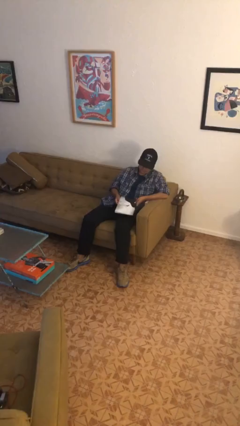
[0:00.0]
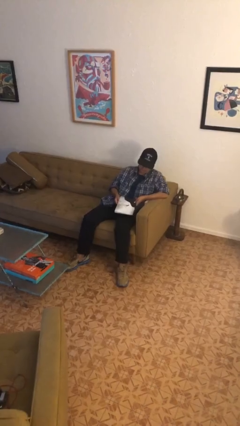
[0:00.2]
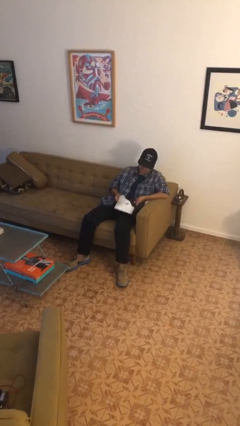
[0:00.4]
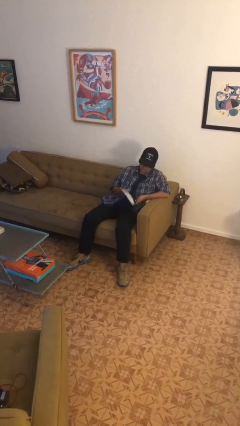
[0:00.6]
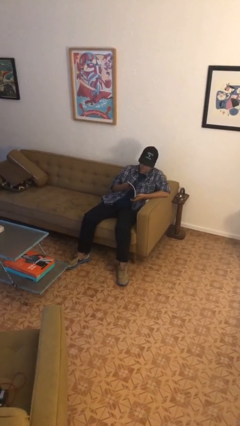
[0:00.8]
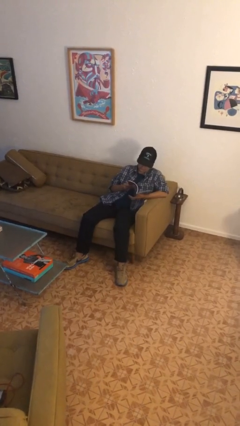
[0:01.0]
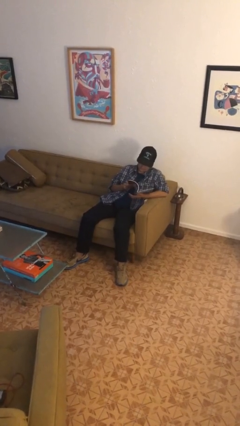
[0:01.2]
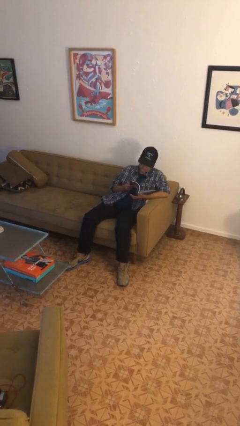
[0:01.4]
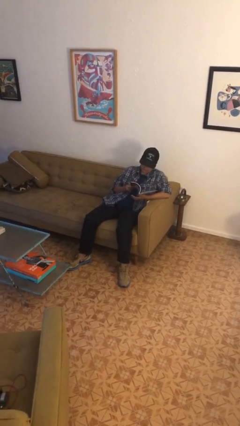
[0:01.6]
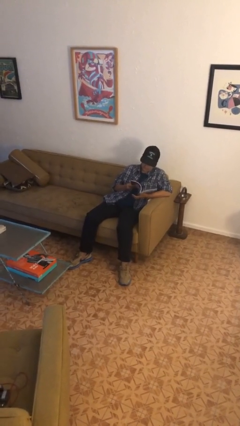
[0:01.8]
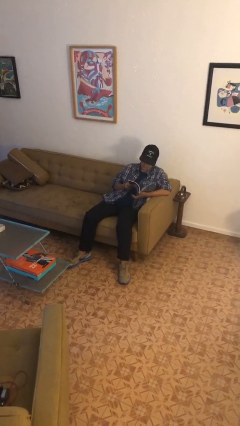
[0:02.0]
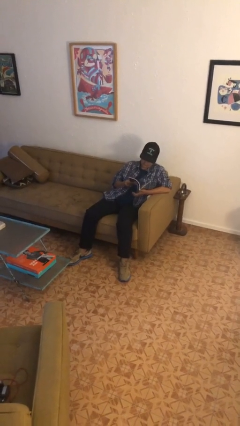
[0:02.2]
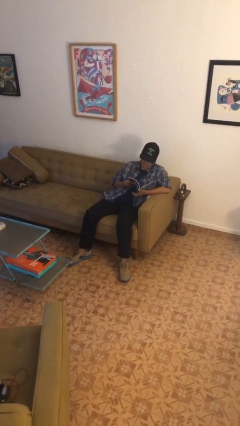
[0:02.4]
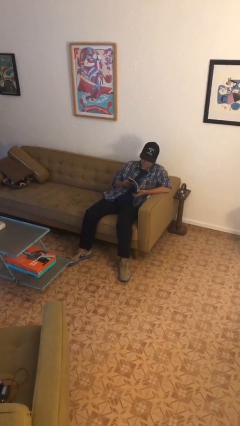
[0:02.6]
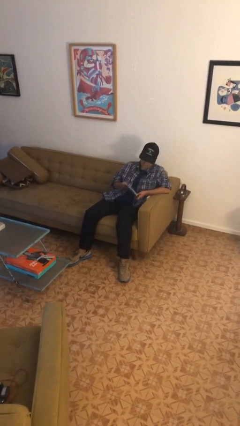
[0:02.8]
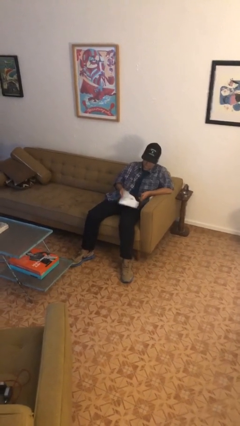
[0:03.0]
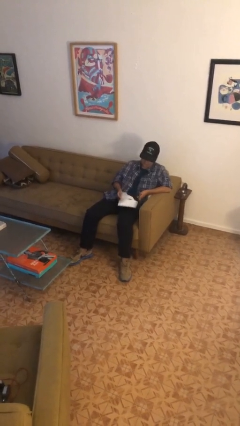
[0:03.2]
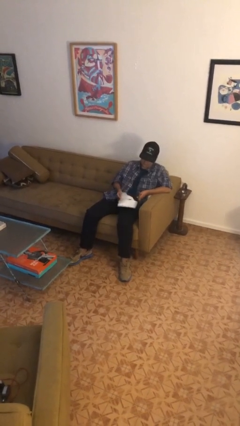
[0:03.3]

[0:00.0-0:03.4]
person reads magazine

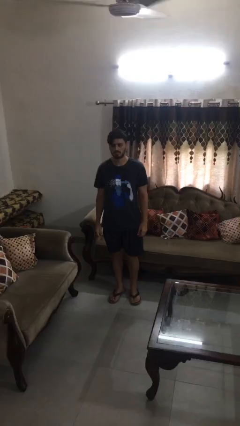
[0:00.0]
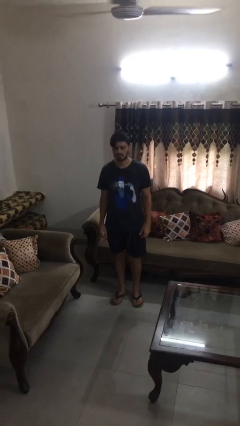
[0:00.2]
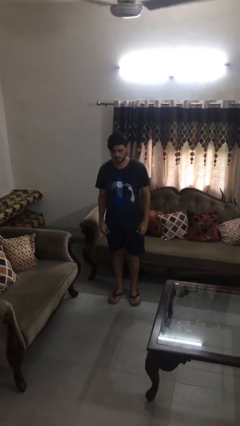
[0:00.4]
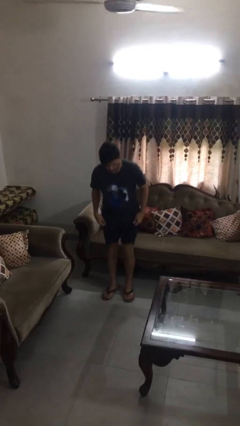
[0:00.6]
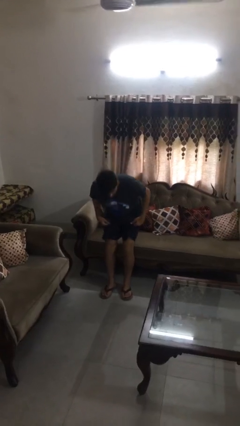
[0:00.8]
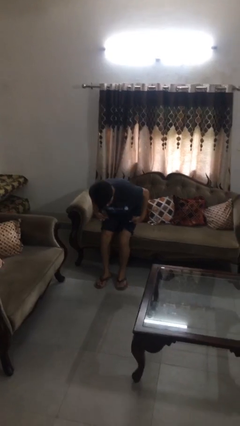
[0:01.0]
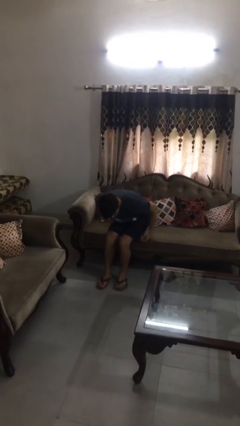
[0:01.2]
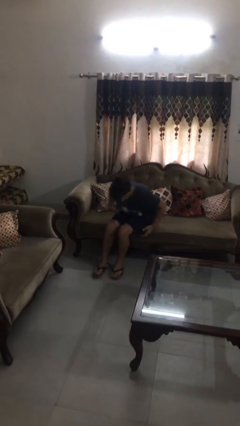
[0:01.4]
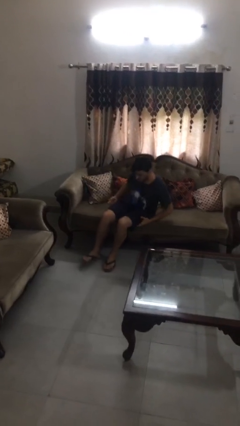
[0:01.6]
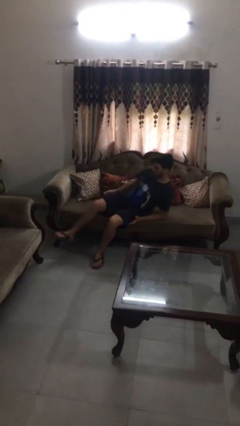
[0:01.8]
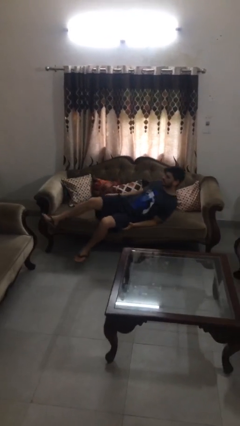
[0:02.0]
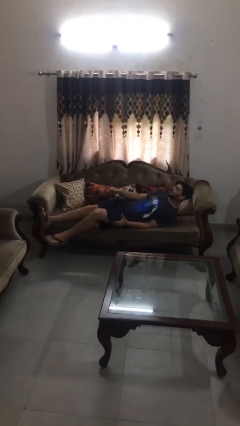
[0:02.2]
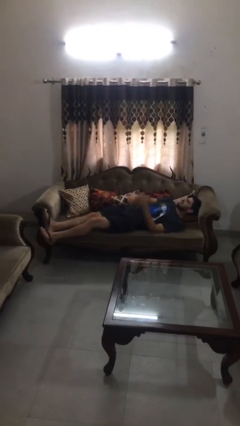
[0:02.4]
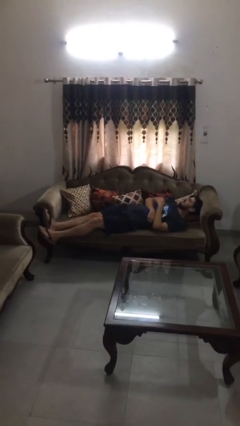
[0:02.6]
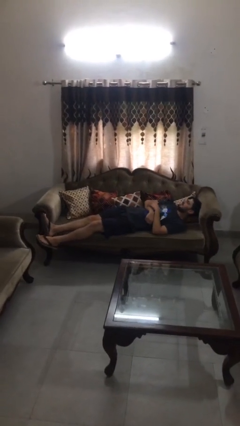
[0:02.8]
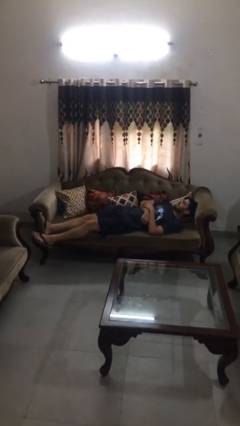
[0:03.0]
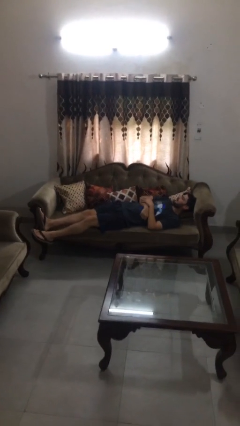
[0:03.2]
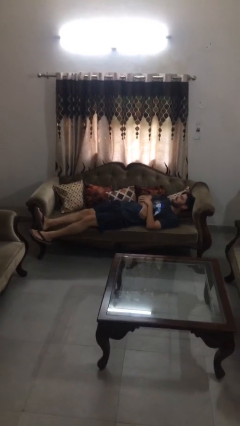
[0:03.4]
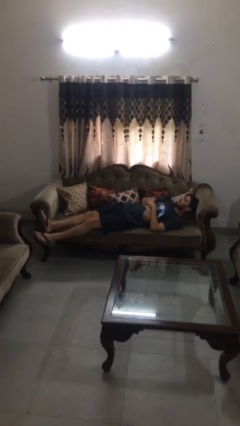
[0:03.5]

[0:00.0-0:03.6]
person lies down on couch

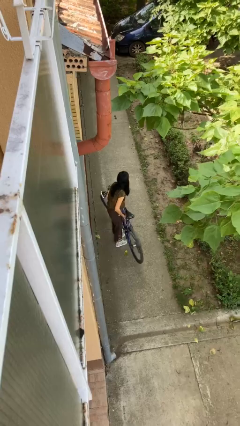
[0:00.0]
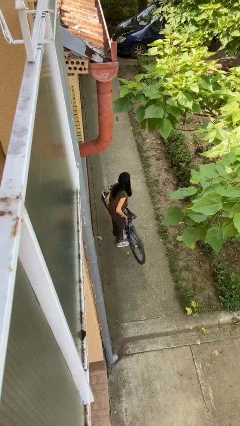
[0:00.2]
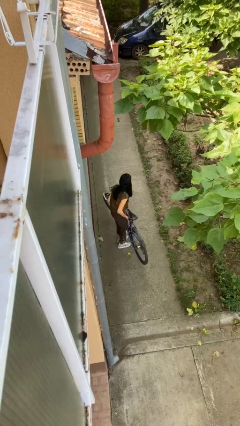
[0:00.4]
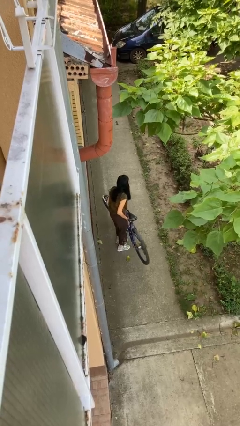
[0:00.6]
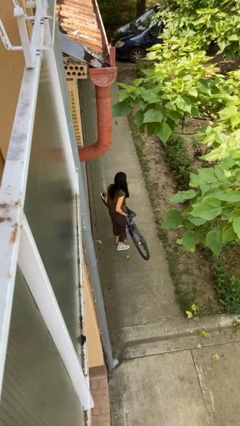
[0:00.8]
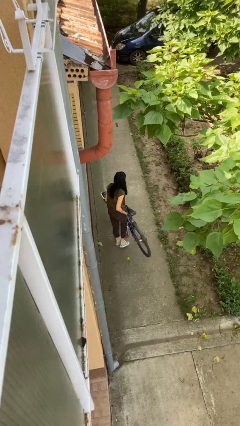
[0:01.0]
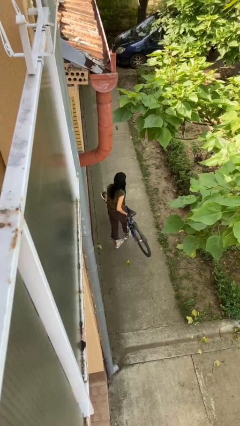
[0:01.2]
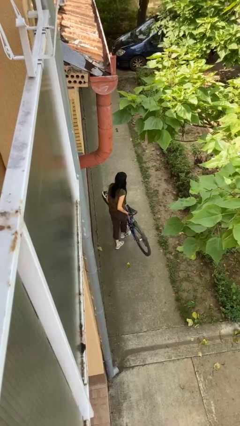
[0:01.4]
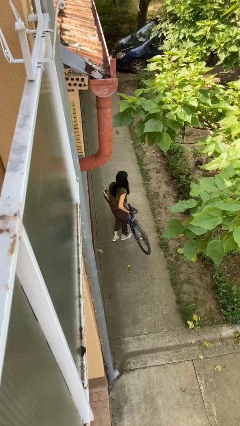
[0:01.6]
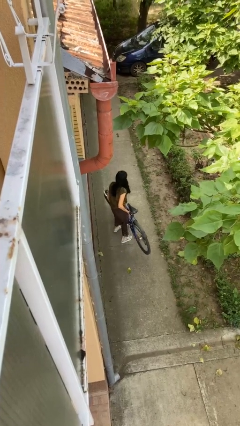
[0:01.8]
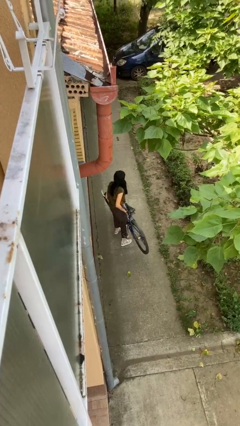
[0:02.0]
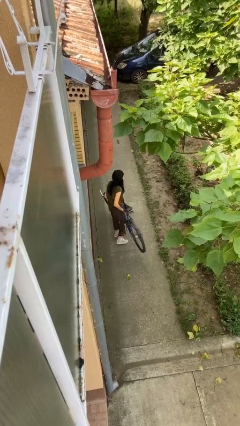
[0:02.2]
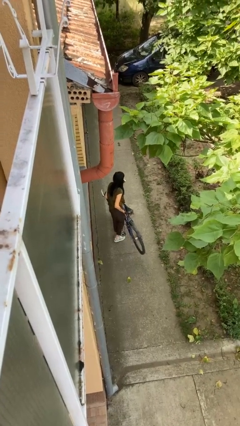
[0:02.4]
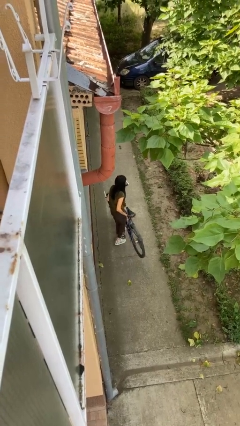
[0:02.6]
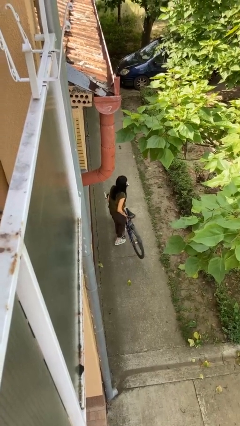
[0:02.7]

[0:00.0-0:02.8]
person carries bicycle

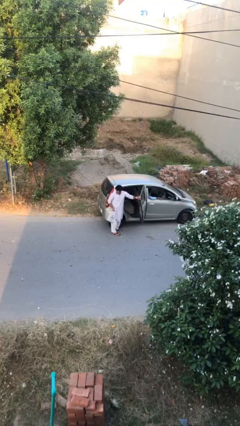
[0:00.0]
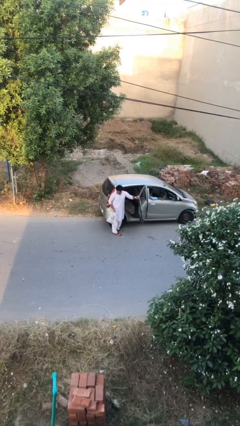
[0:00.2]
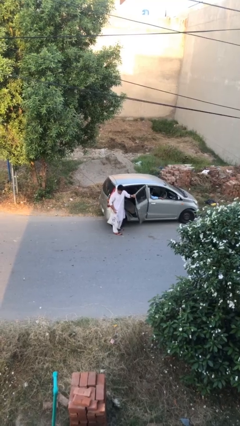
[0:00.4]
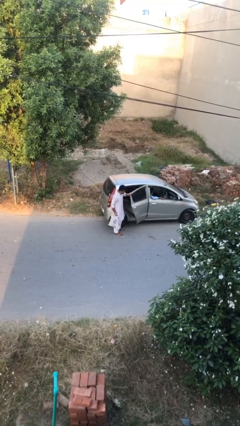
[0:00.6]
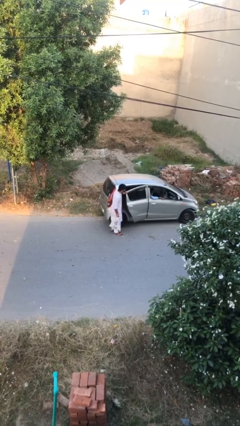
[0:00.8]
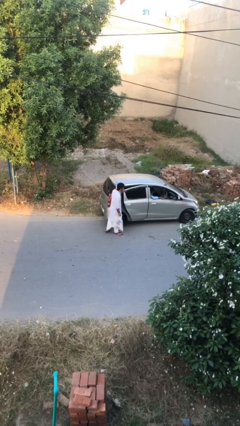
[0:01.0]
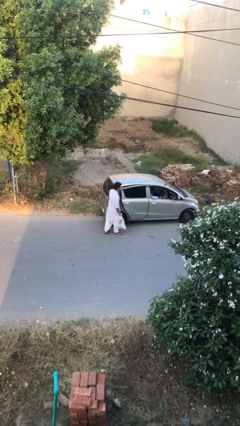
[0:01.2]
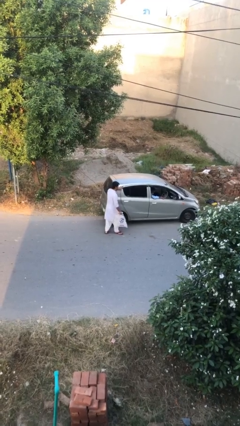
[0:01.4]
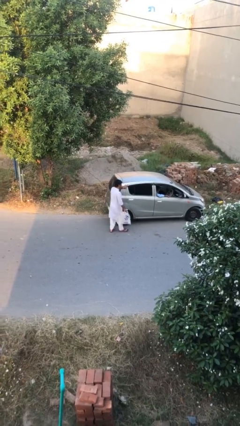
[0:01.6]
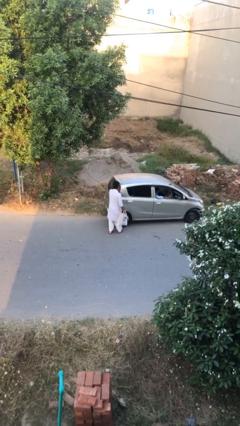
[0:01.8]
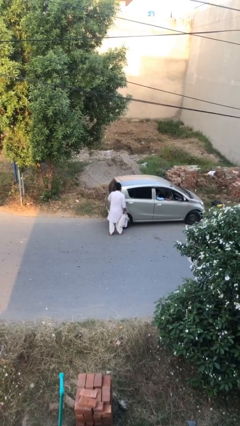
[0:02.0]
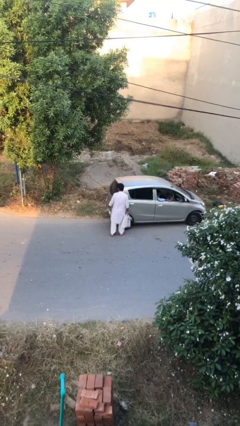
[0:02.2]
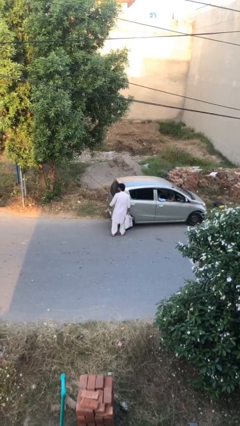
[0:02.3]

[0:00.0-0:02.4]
person closes car door

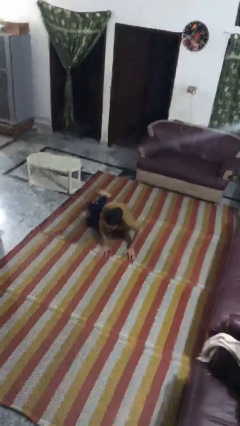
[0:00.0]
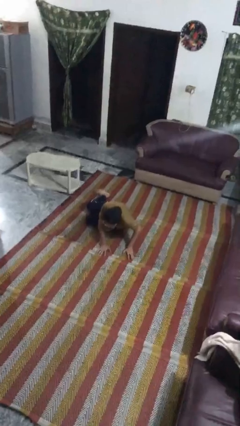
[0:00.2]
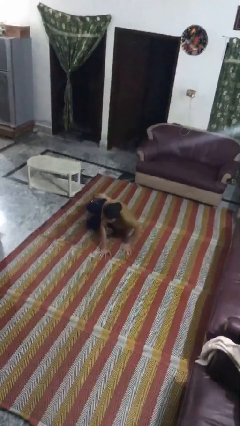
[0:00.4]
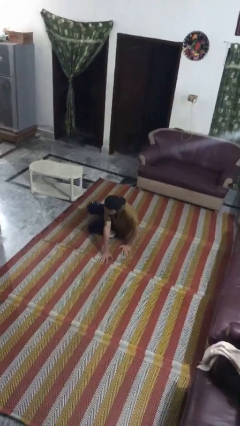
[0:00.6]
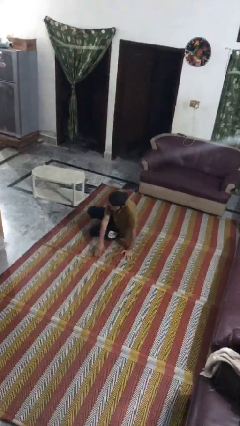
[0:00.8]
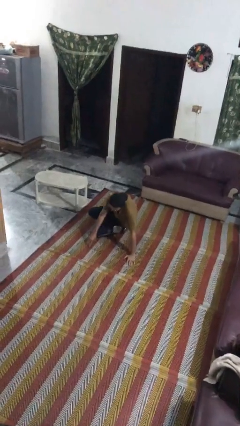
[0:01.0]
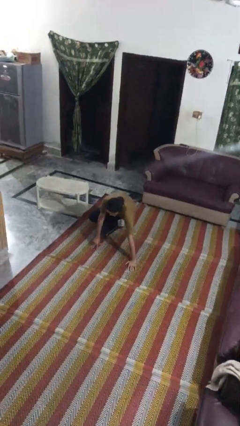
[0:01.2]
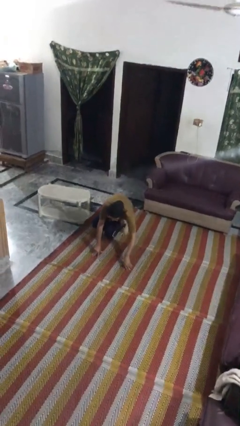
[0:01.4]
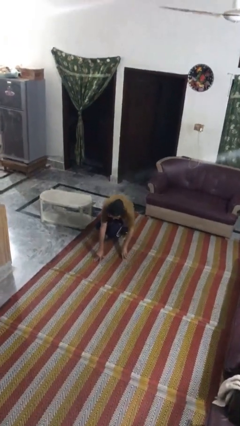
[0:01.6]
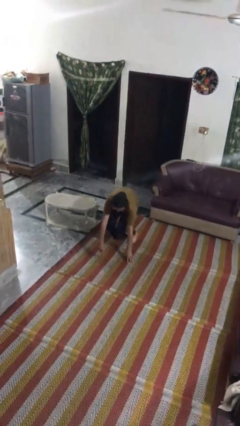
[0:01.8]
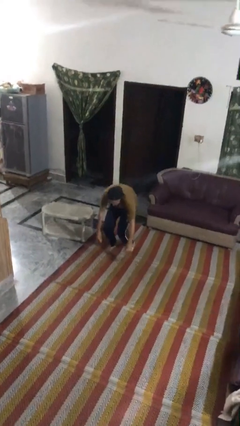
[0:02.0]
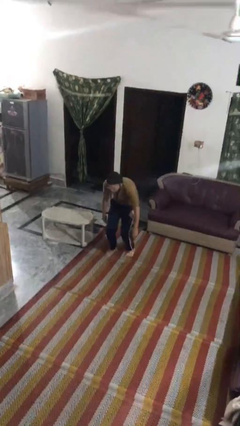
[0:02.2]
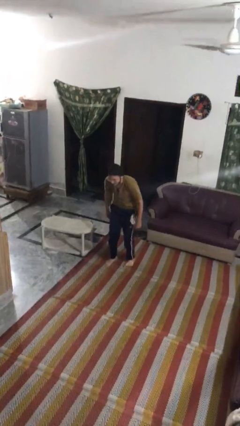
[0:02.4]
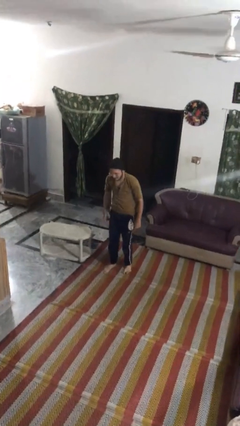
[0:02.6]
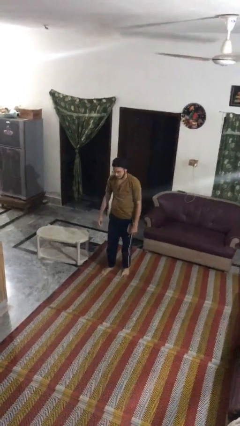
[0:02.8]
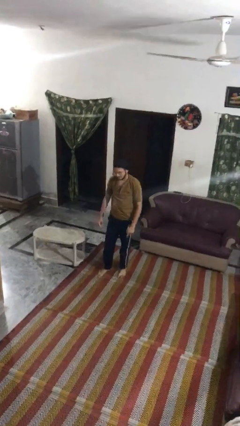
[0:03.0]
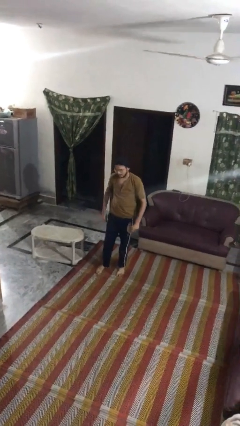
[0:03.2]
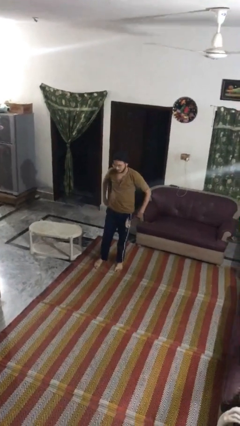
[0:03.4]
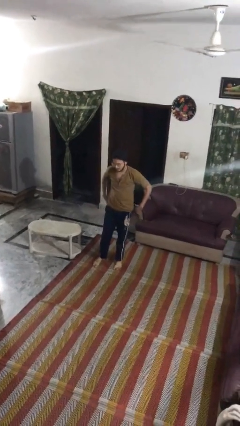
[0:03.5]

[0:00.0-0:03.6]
person stands up from floor

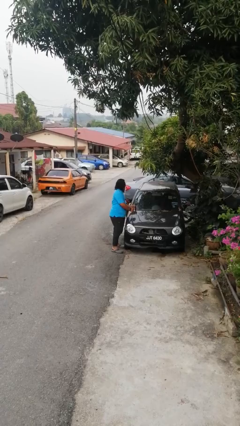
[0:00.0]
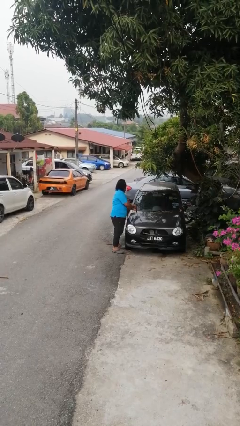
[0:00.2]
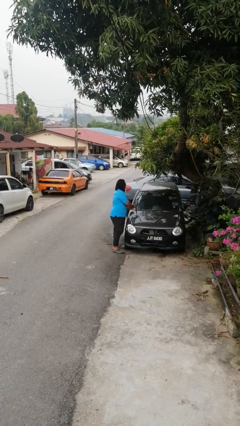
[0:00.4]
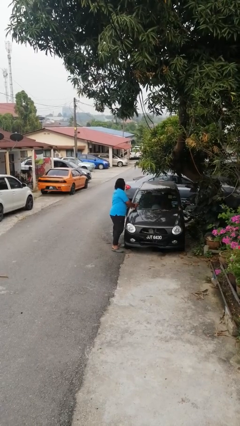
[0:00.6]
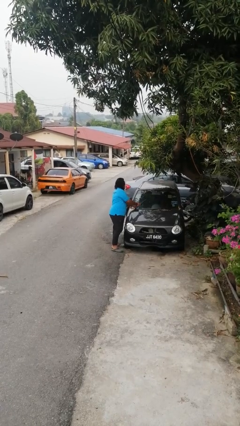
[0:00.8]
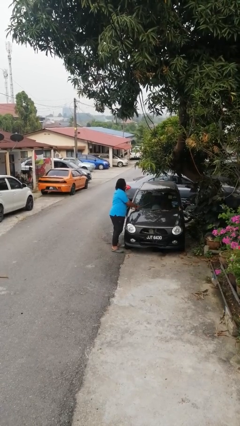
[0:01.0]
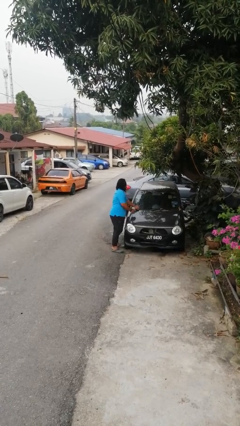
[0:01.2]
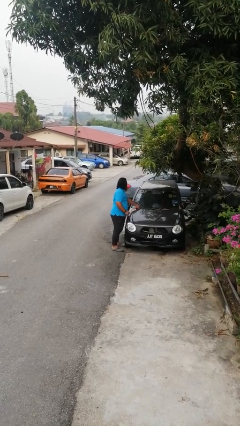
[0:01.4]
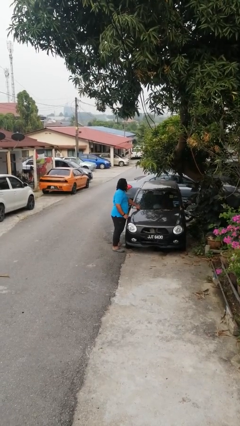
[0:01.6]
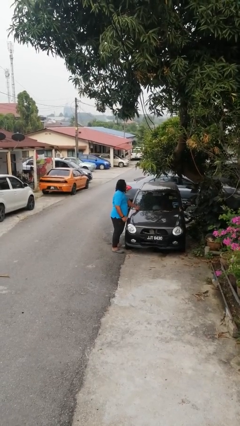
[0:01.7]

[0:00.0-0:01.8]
person flips down car wipers
